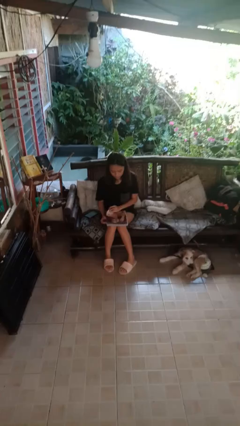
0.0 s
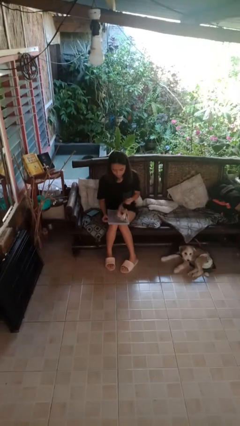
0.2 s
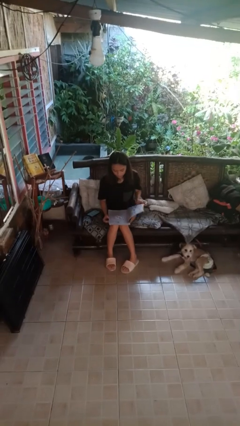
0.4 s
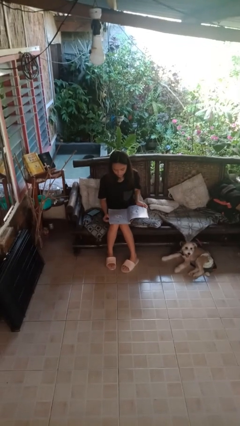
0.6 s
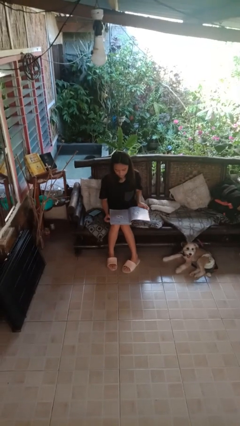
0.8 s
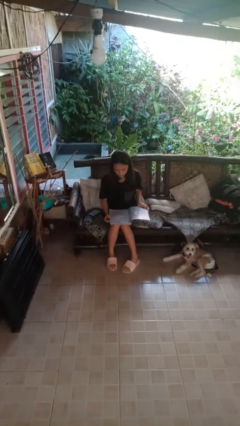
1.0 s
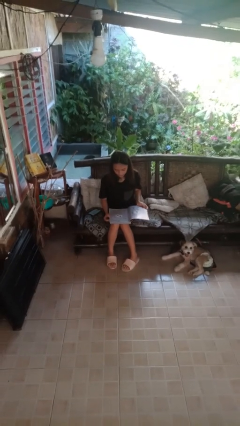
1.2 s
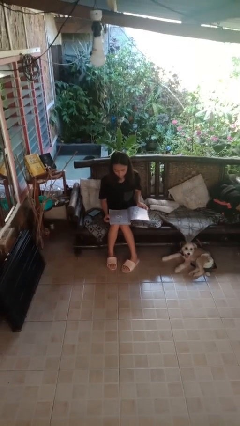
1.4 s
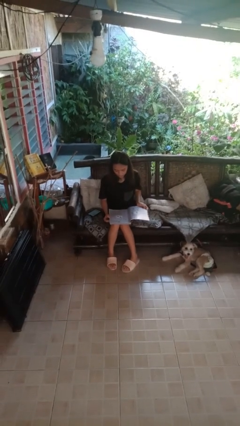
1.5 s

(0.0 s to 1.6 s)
person reads magazine

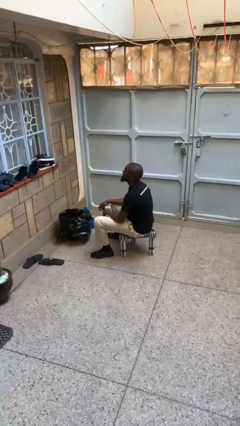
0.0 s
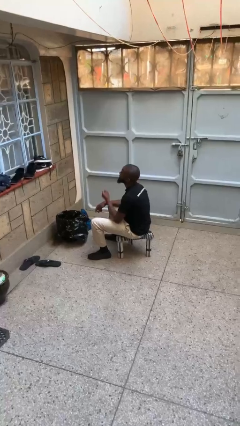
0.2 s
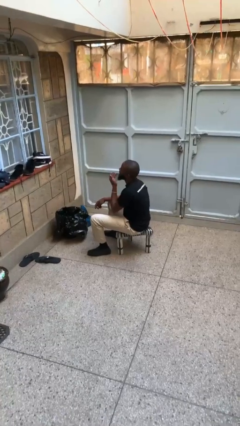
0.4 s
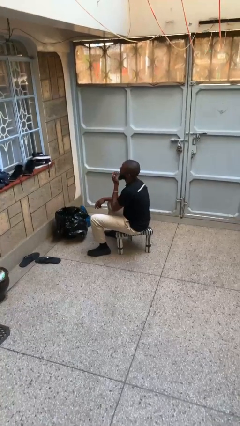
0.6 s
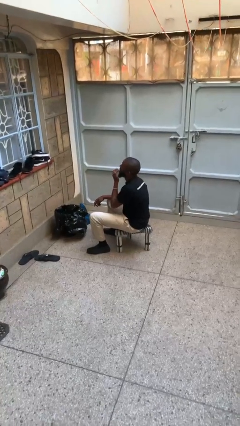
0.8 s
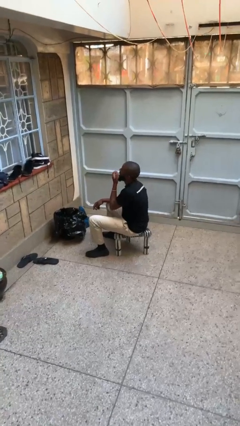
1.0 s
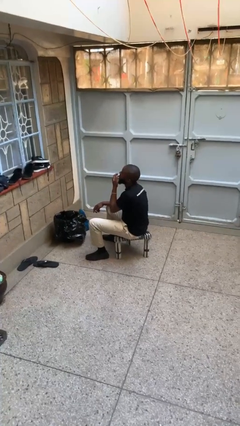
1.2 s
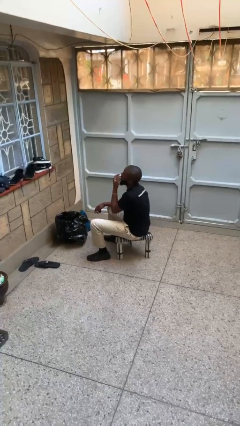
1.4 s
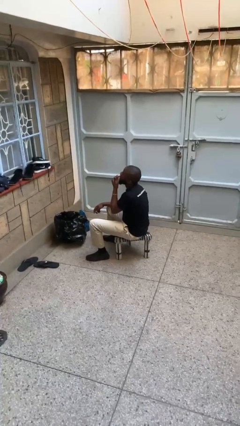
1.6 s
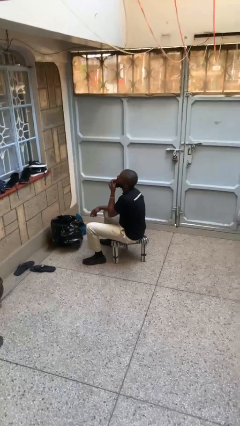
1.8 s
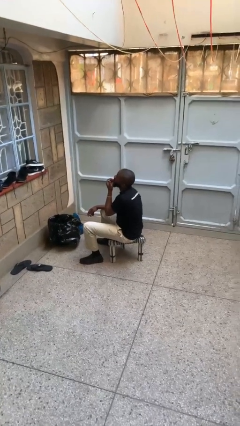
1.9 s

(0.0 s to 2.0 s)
person licks fingers

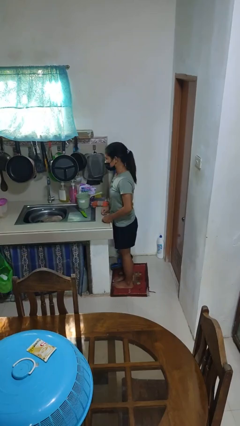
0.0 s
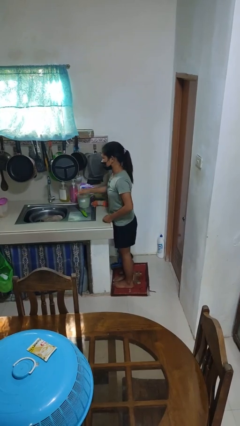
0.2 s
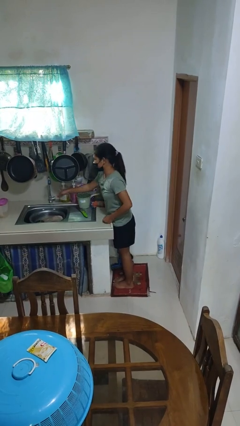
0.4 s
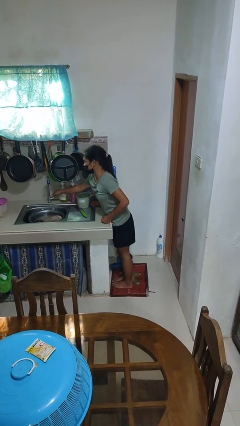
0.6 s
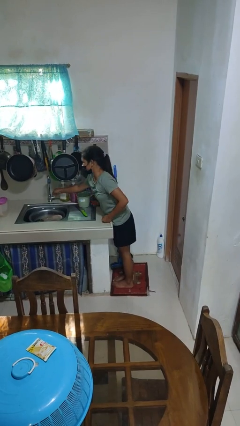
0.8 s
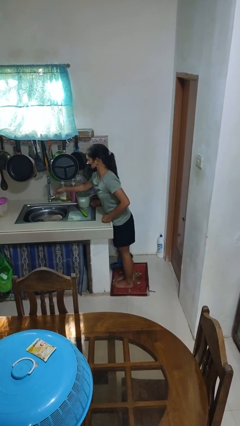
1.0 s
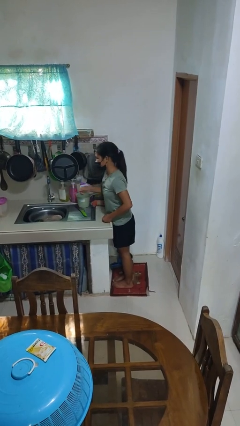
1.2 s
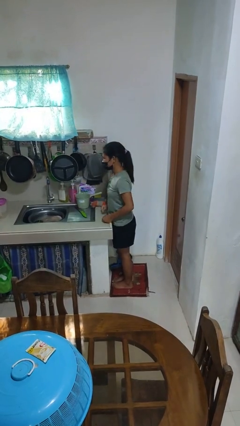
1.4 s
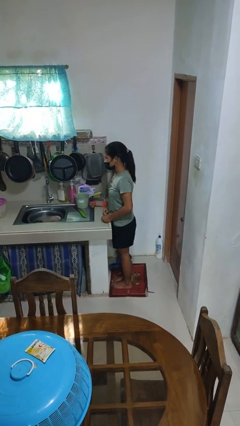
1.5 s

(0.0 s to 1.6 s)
person turns off faucet

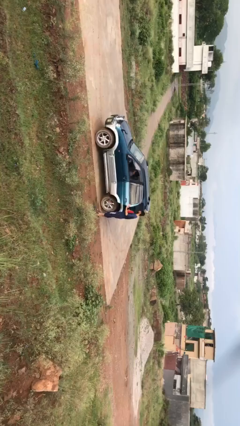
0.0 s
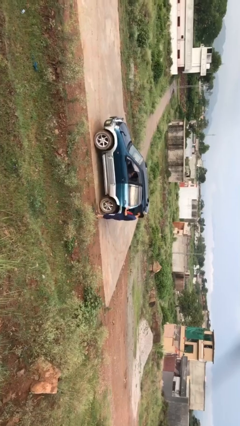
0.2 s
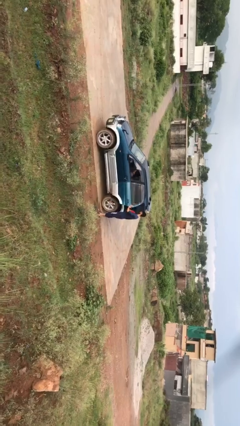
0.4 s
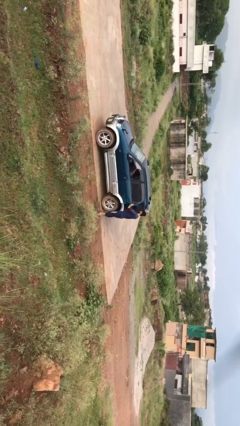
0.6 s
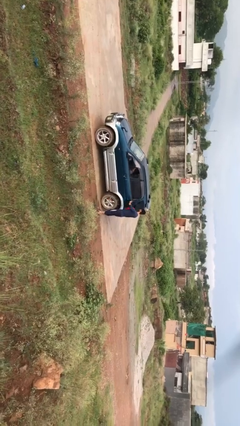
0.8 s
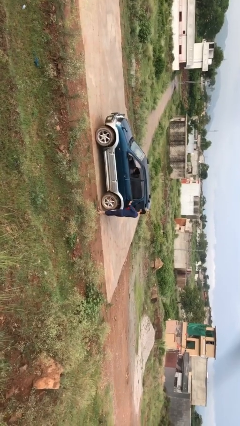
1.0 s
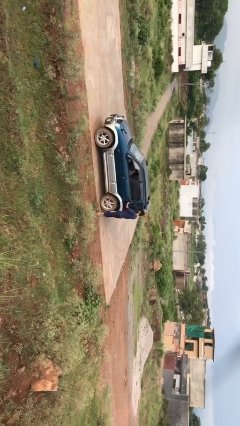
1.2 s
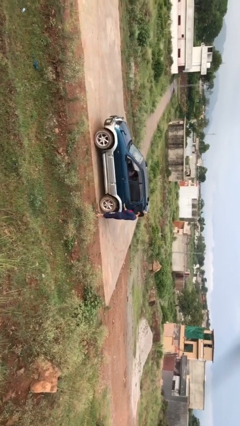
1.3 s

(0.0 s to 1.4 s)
person closes car door

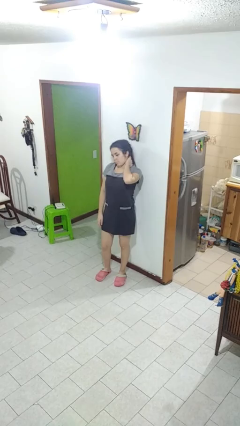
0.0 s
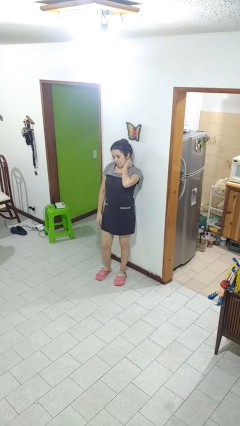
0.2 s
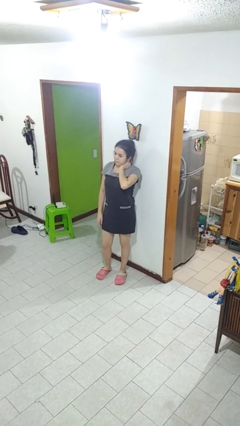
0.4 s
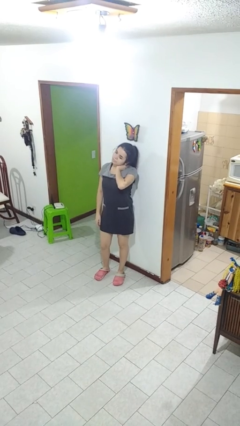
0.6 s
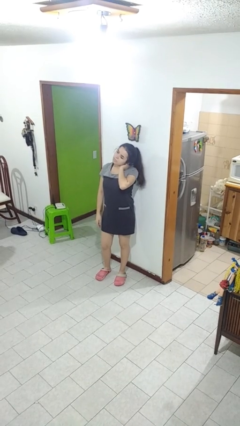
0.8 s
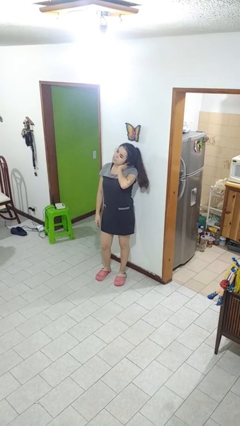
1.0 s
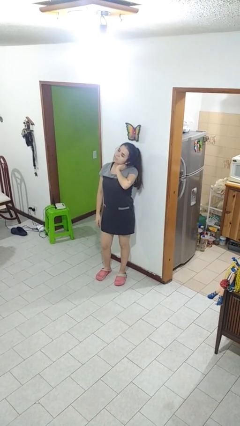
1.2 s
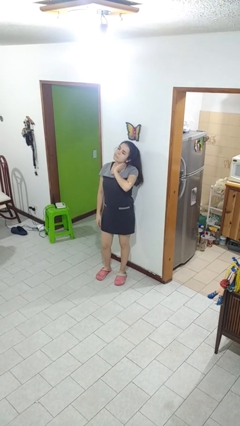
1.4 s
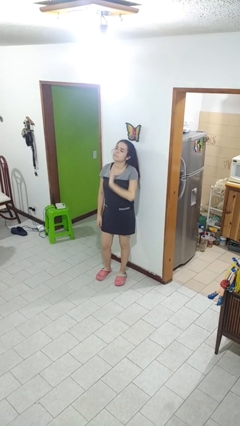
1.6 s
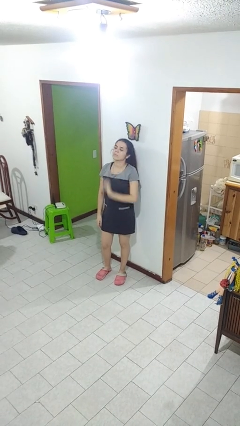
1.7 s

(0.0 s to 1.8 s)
person rubs neck

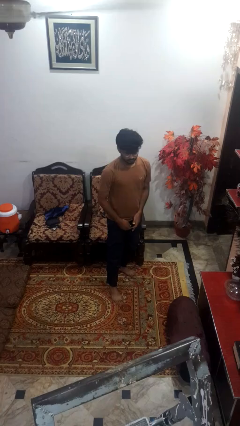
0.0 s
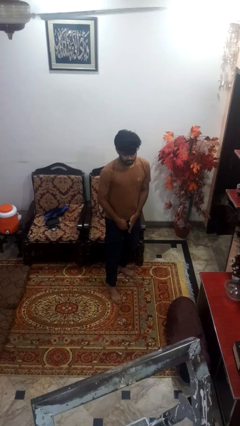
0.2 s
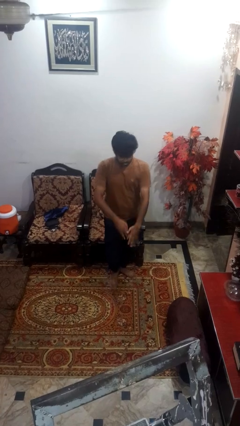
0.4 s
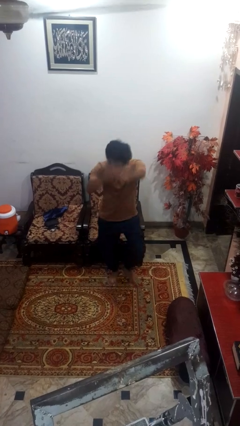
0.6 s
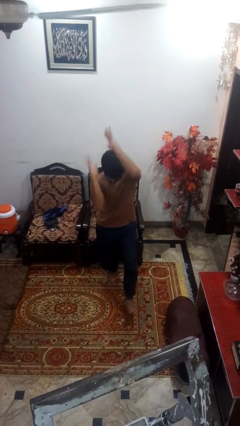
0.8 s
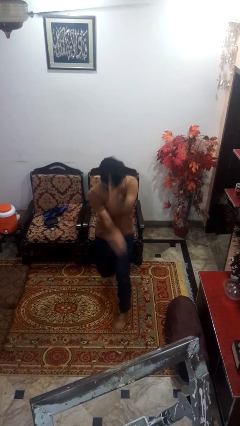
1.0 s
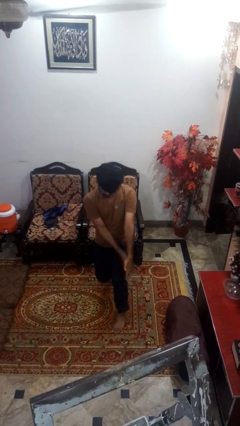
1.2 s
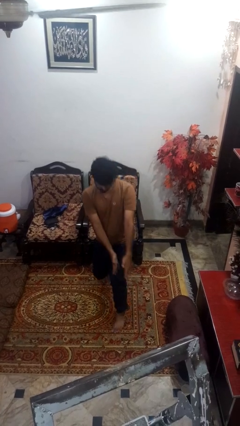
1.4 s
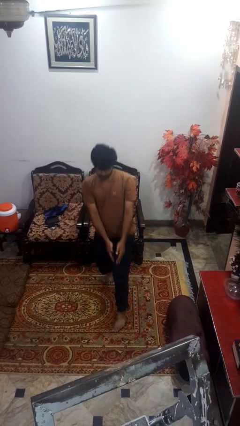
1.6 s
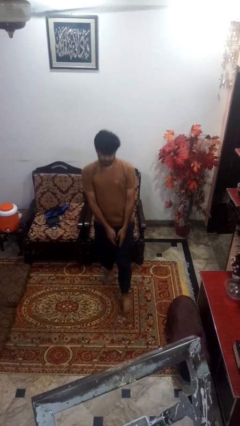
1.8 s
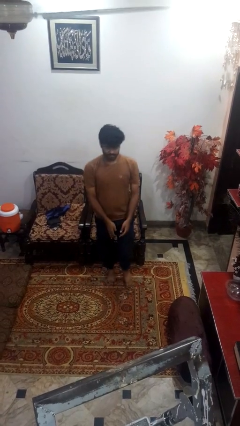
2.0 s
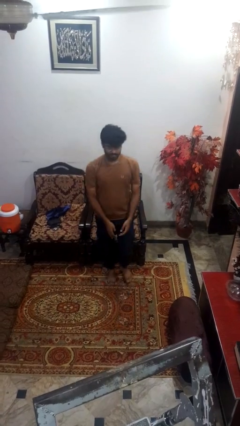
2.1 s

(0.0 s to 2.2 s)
person karate chop

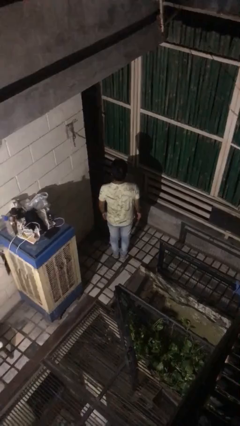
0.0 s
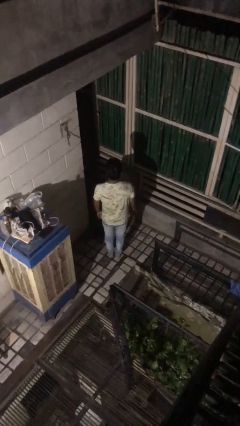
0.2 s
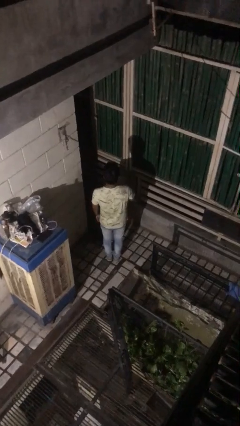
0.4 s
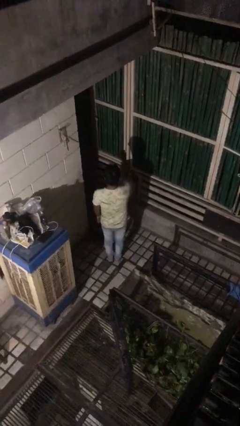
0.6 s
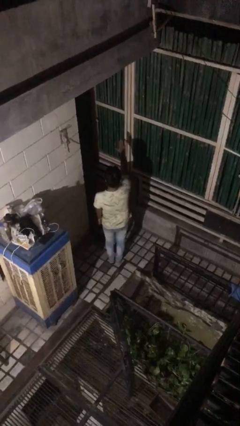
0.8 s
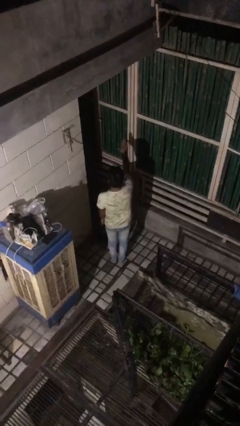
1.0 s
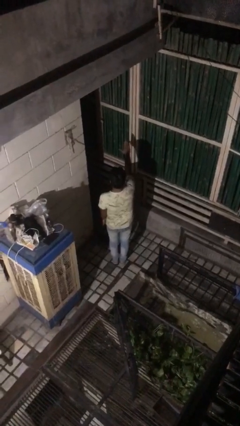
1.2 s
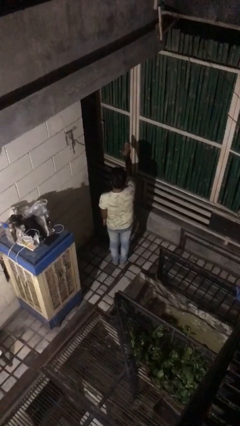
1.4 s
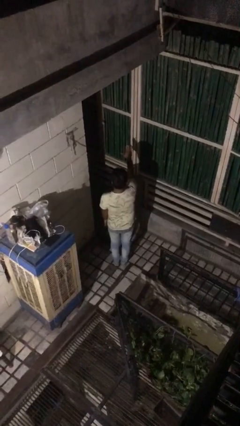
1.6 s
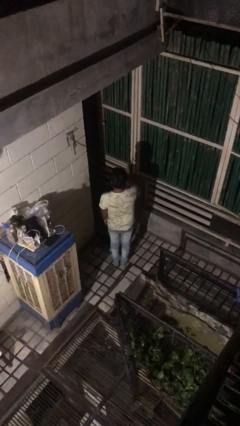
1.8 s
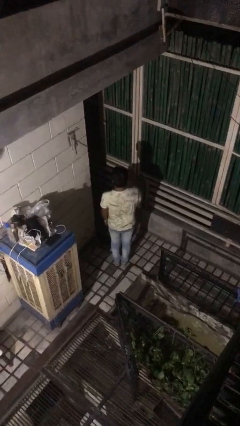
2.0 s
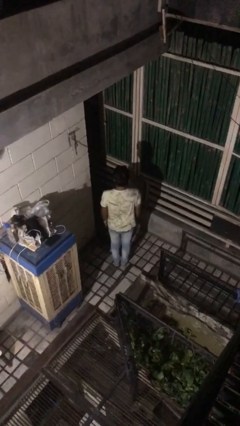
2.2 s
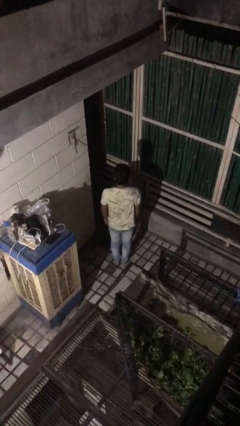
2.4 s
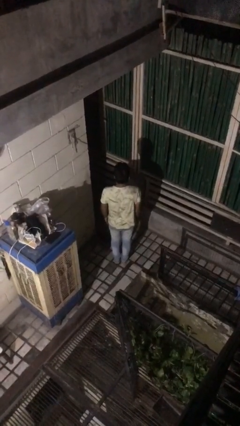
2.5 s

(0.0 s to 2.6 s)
person gestures stop

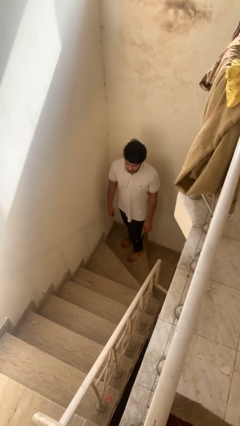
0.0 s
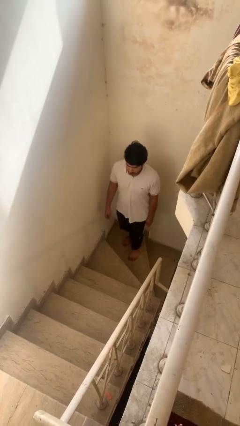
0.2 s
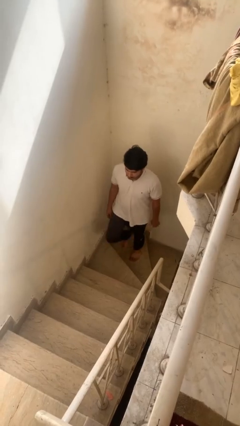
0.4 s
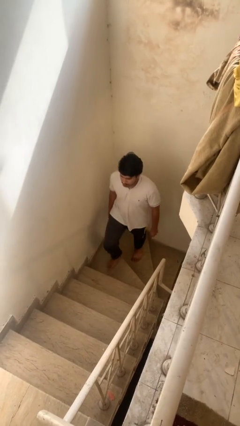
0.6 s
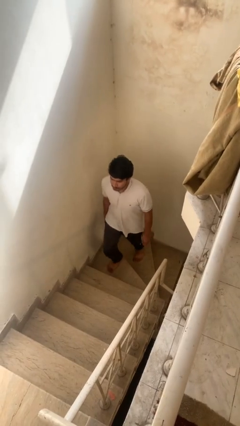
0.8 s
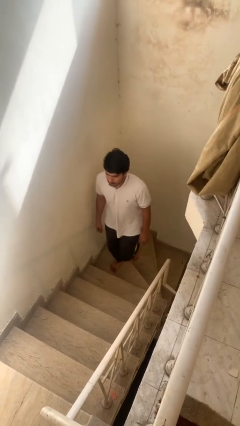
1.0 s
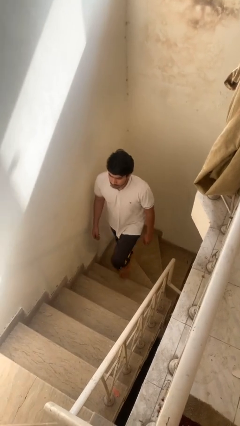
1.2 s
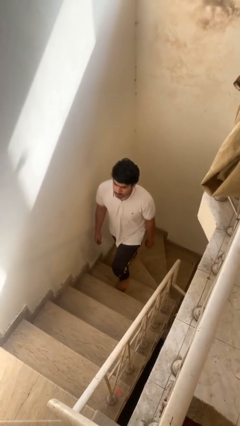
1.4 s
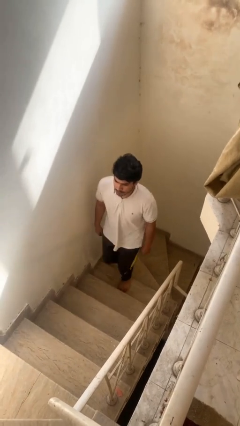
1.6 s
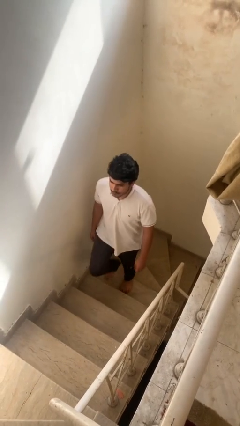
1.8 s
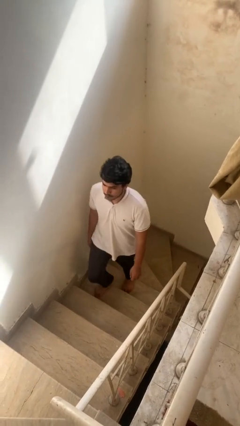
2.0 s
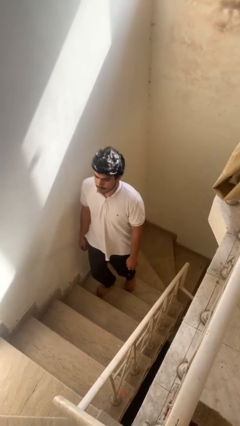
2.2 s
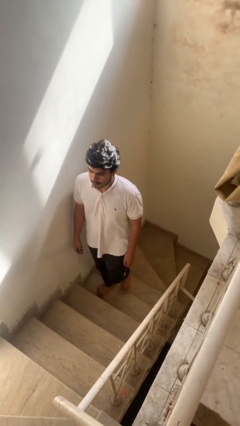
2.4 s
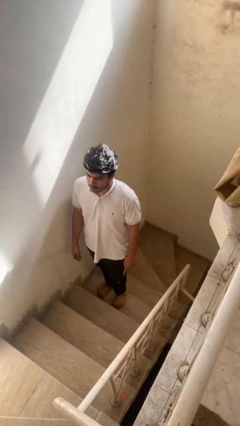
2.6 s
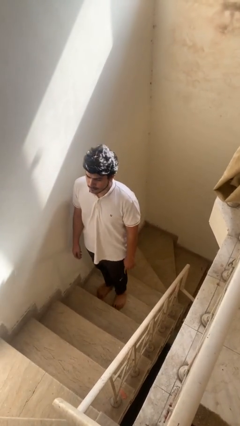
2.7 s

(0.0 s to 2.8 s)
person climbs up stairs

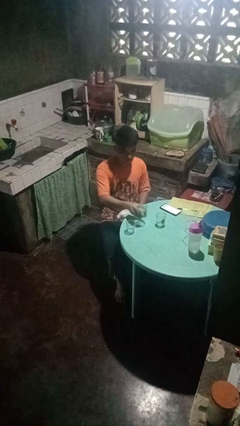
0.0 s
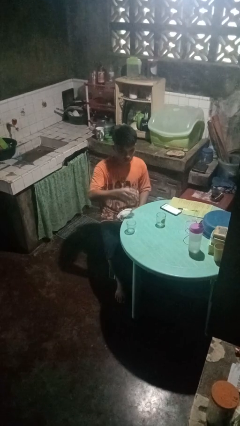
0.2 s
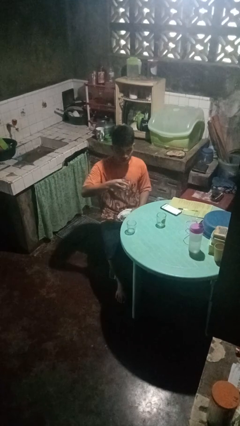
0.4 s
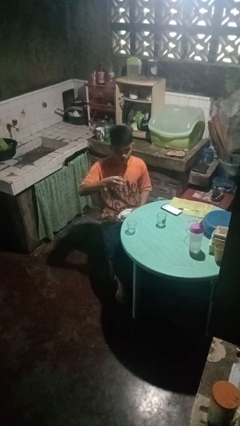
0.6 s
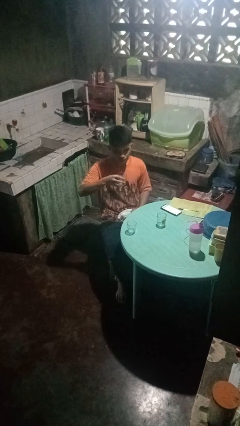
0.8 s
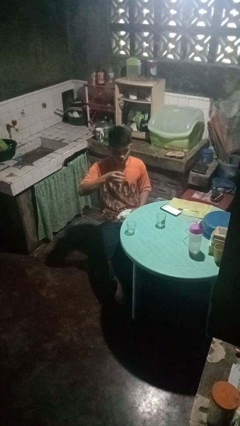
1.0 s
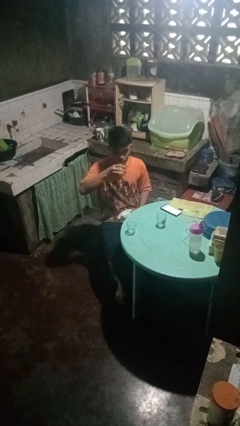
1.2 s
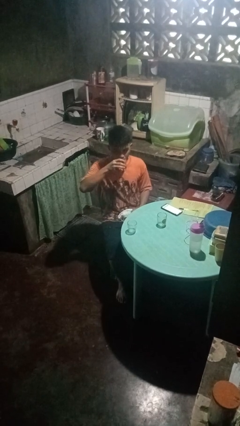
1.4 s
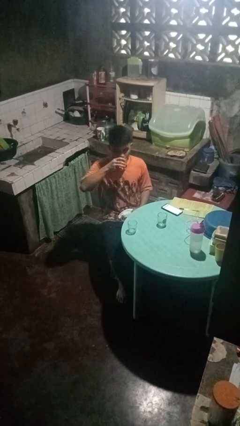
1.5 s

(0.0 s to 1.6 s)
person picks up object from table
